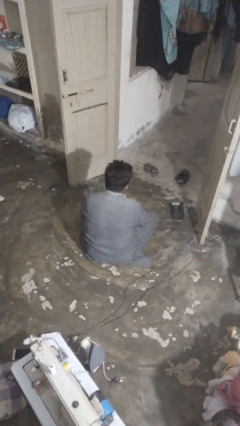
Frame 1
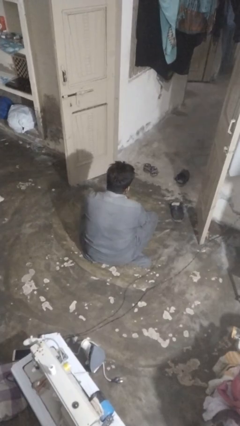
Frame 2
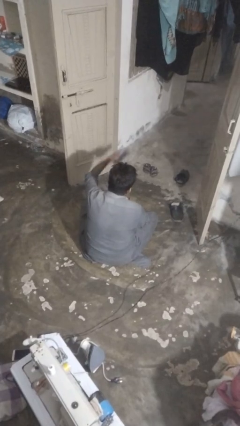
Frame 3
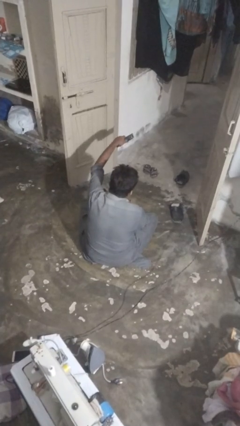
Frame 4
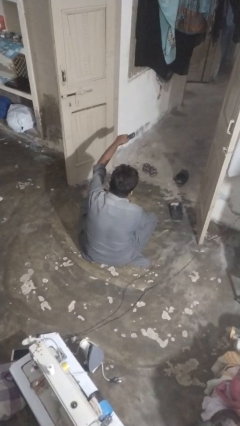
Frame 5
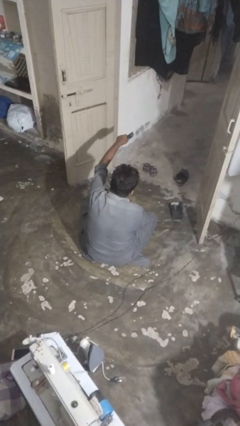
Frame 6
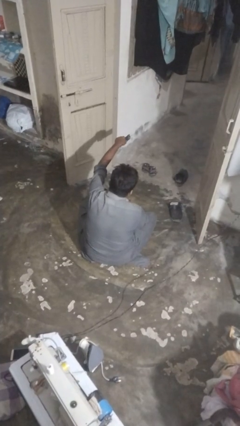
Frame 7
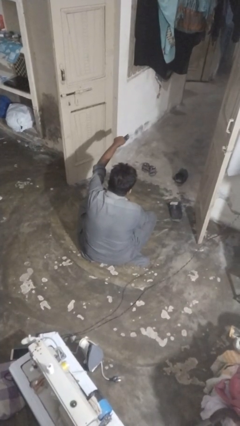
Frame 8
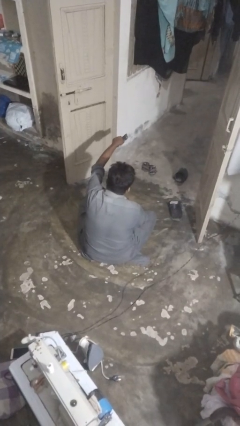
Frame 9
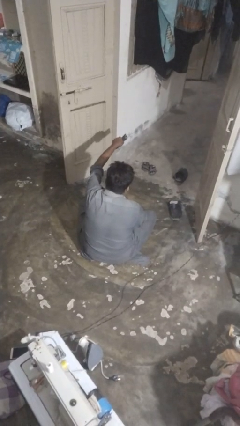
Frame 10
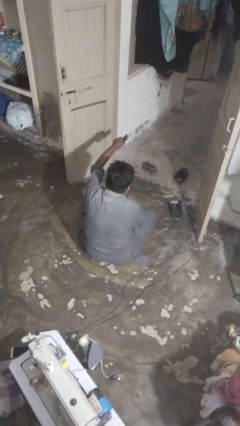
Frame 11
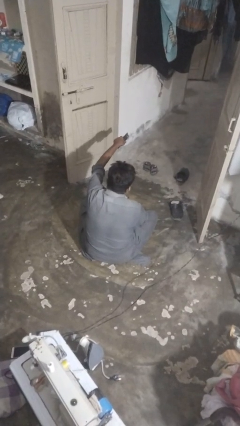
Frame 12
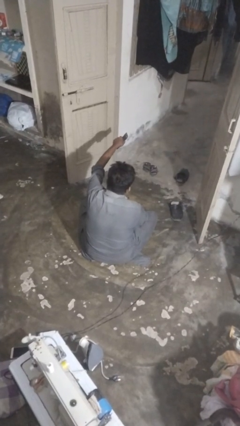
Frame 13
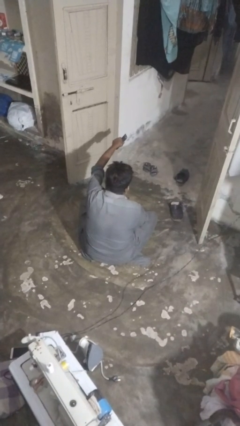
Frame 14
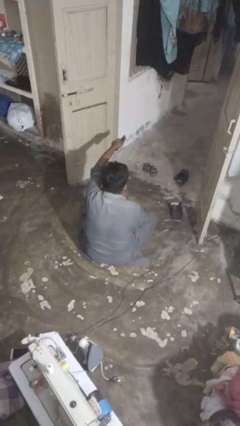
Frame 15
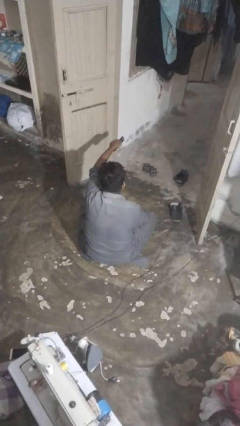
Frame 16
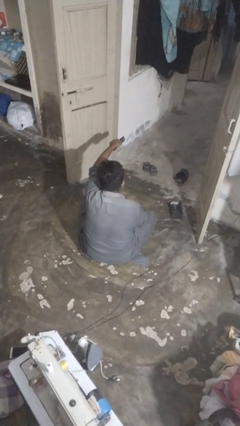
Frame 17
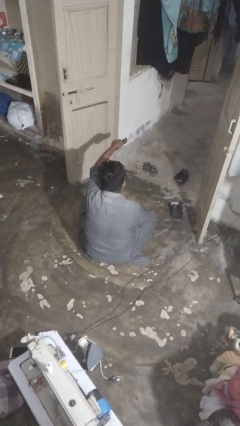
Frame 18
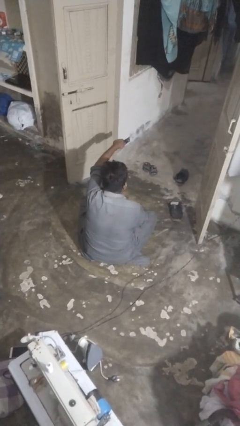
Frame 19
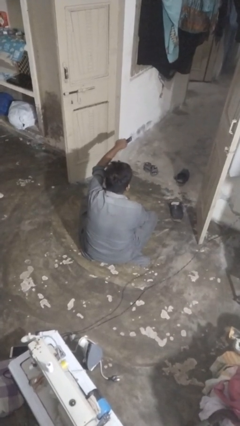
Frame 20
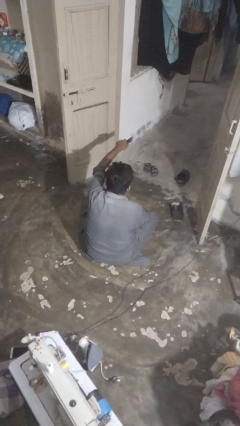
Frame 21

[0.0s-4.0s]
person uses television remote

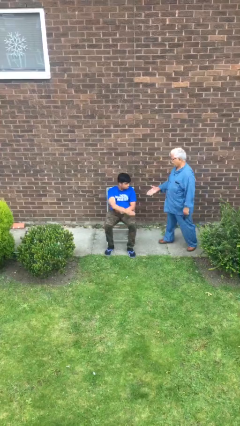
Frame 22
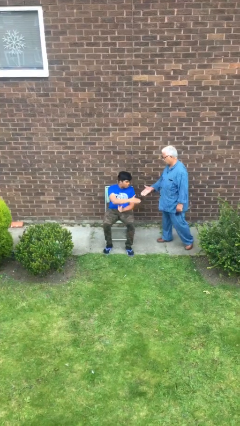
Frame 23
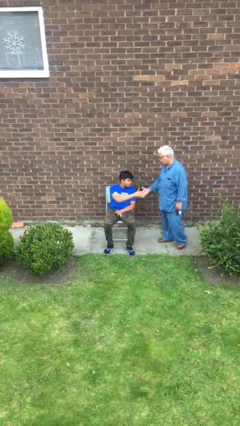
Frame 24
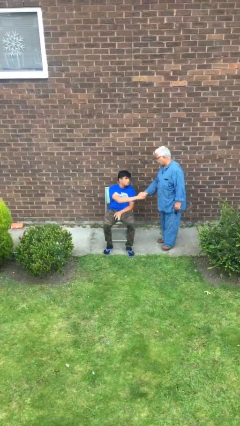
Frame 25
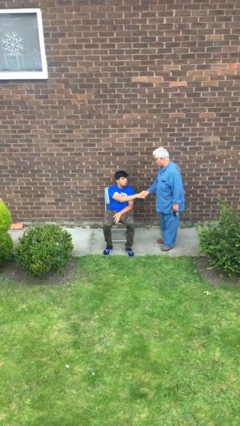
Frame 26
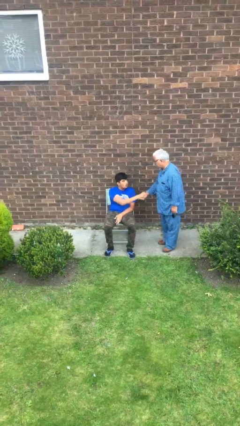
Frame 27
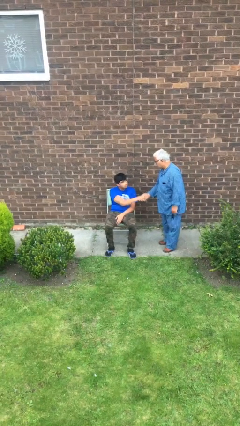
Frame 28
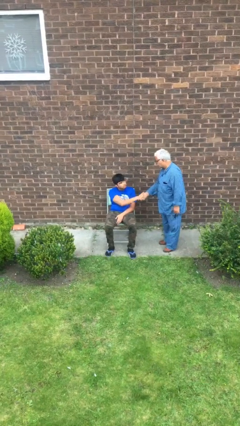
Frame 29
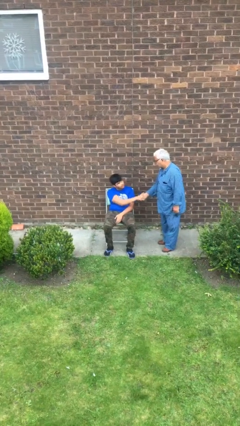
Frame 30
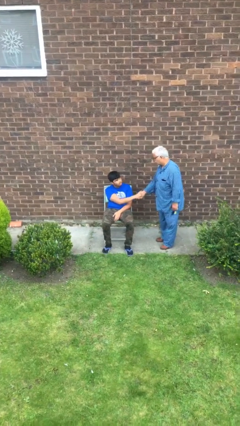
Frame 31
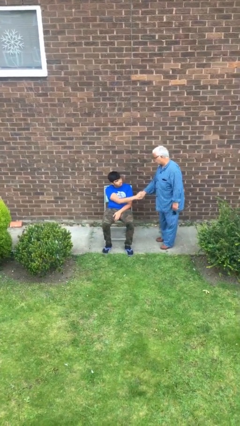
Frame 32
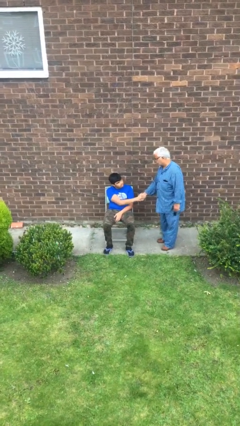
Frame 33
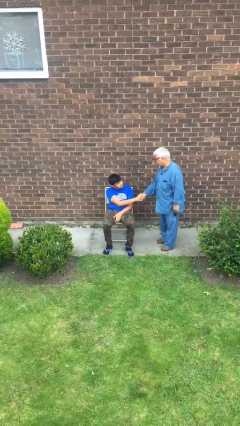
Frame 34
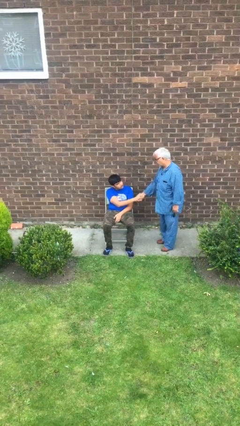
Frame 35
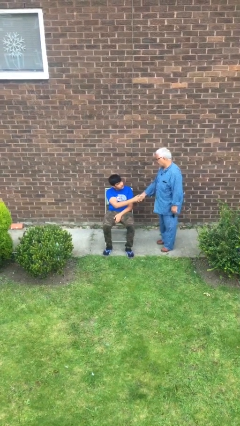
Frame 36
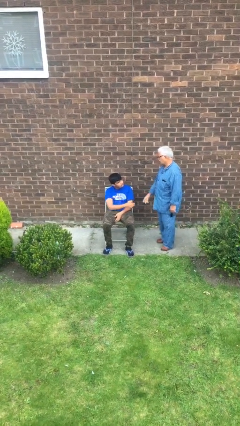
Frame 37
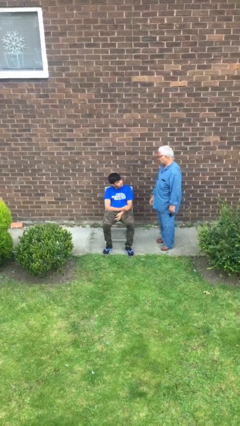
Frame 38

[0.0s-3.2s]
person shakes hand

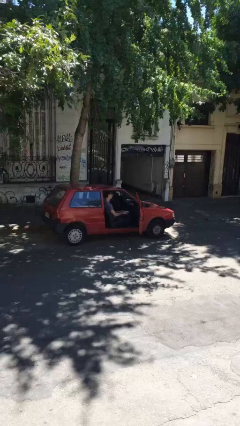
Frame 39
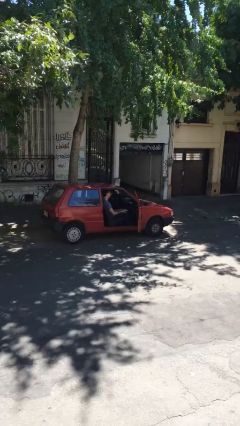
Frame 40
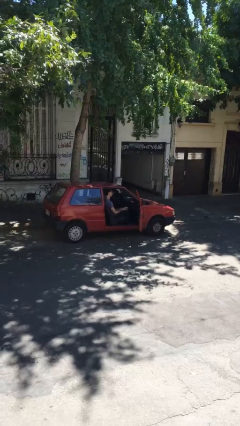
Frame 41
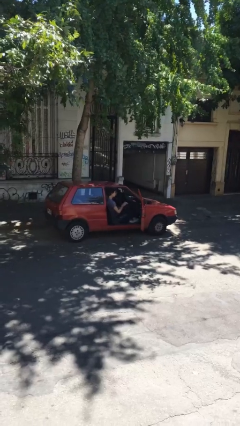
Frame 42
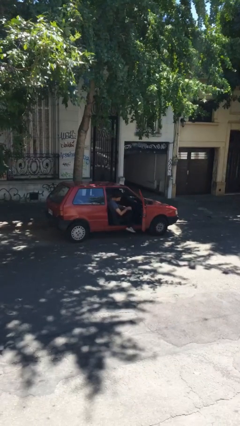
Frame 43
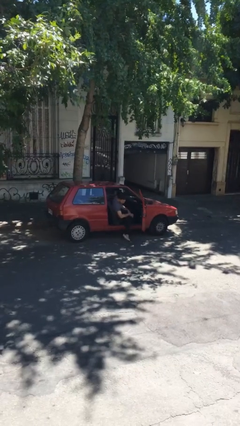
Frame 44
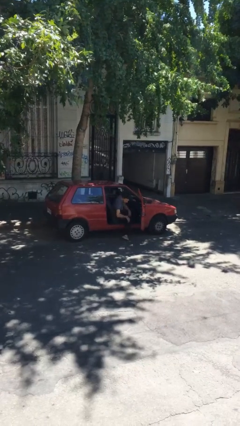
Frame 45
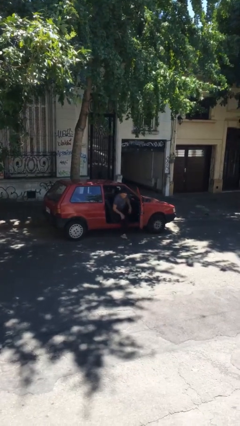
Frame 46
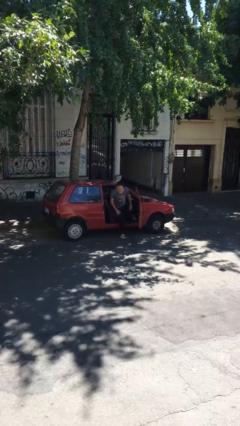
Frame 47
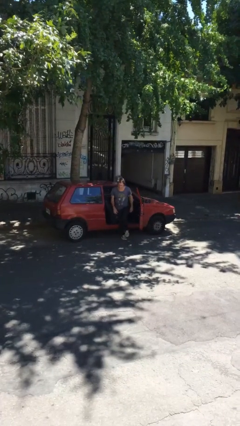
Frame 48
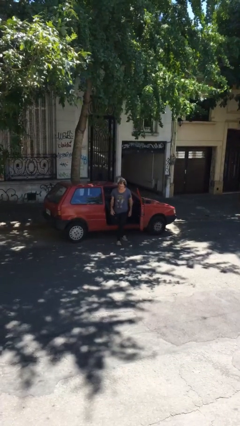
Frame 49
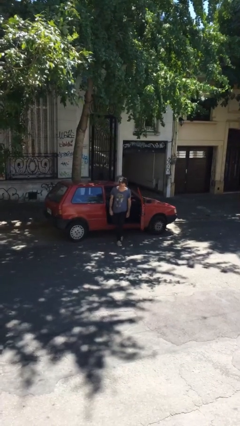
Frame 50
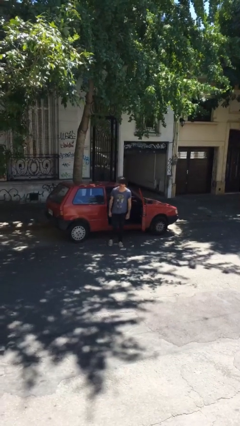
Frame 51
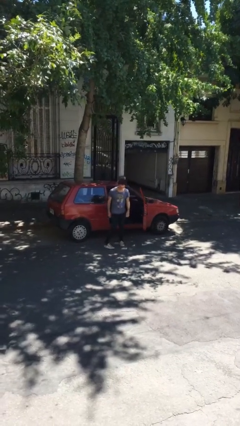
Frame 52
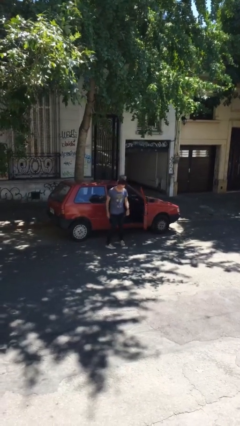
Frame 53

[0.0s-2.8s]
person exits car

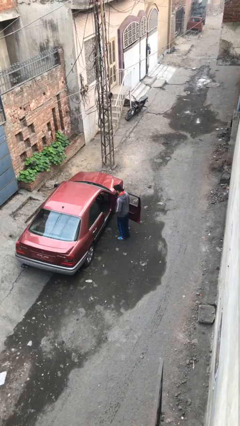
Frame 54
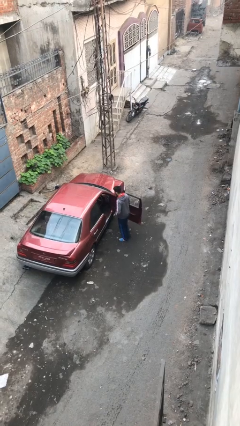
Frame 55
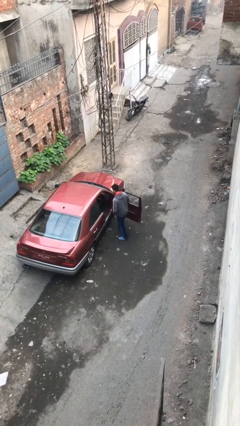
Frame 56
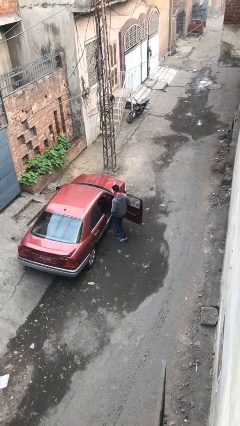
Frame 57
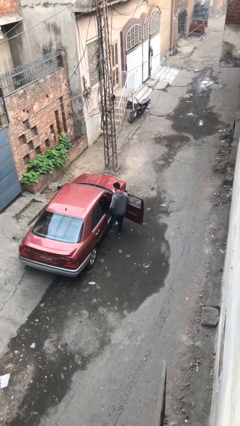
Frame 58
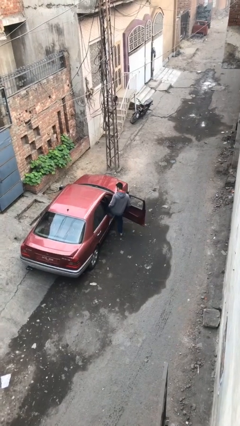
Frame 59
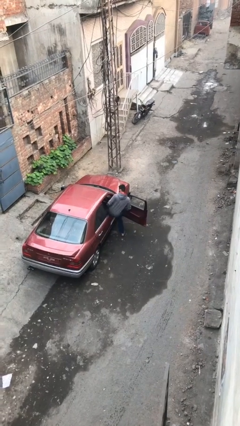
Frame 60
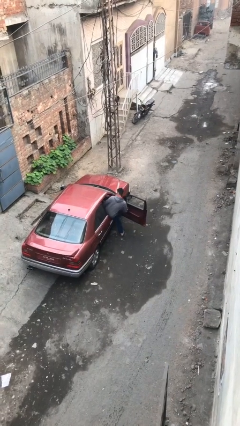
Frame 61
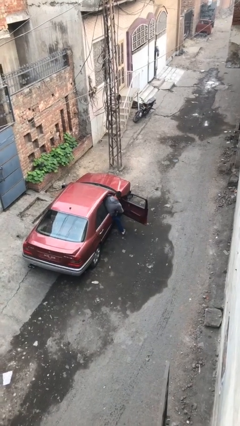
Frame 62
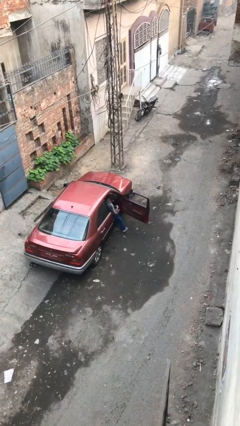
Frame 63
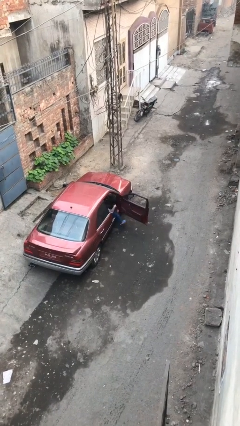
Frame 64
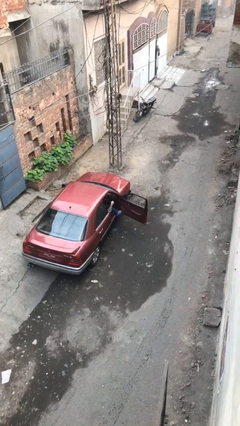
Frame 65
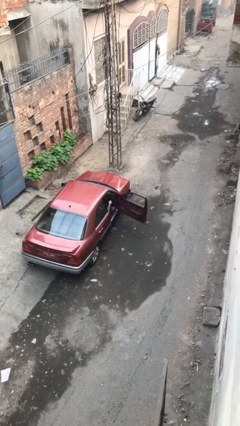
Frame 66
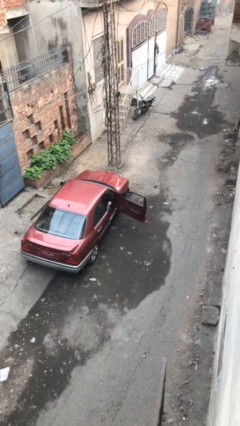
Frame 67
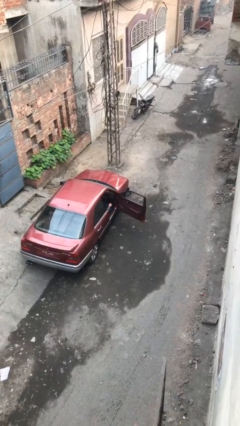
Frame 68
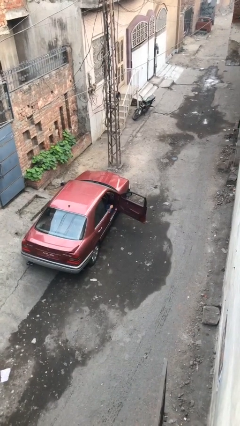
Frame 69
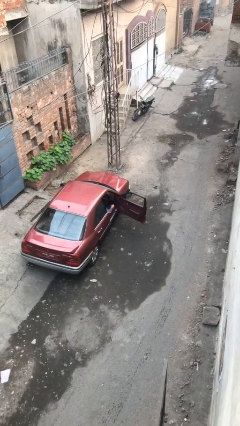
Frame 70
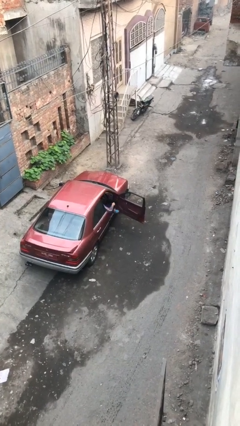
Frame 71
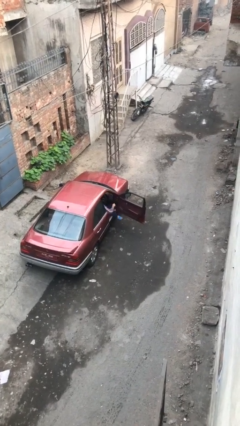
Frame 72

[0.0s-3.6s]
person enters car

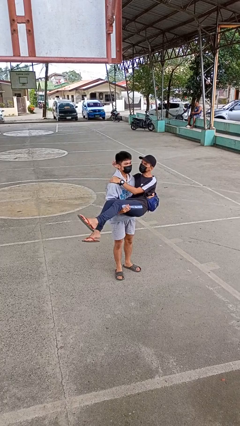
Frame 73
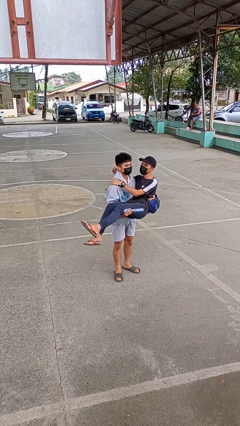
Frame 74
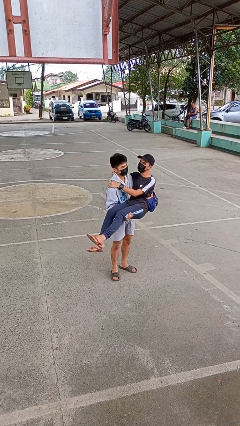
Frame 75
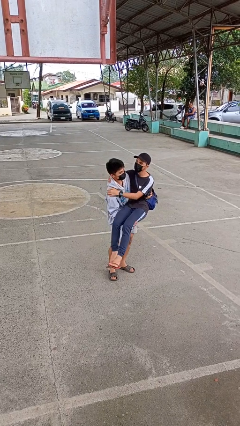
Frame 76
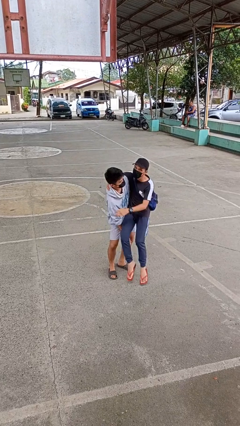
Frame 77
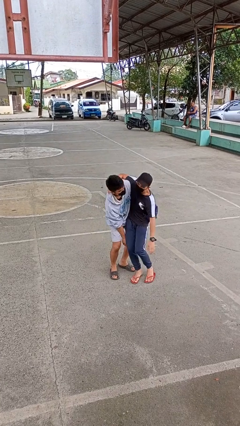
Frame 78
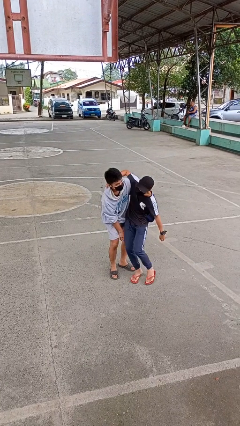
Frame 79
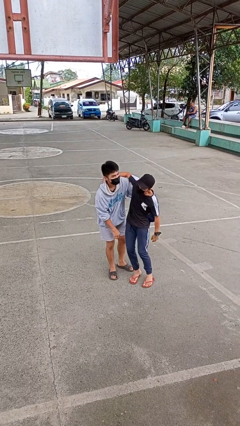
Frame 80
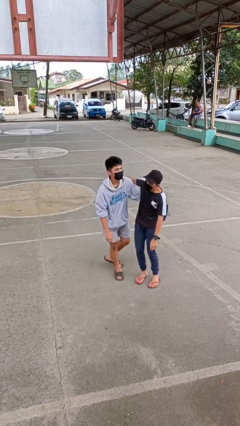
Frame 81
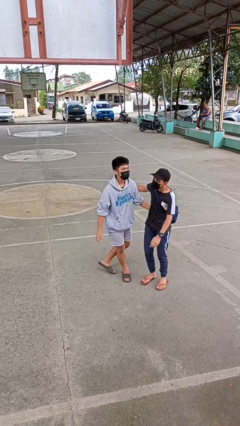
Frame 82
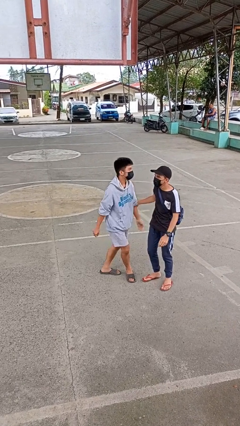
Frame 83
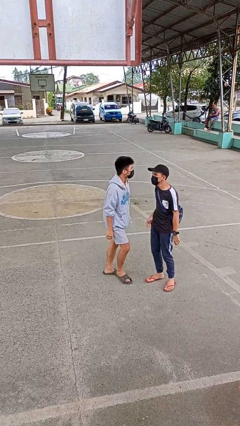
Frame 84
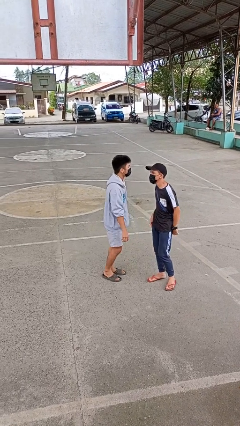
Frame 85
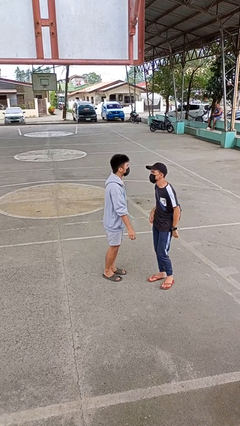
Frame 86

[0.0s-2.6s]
person puts down person

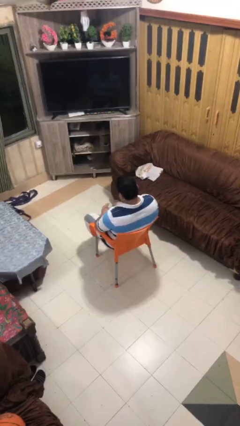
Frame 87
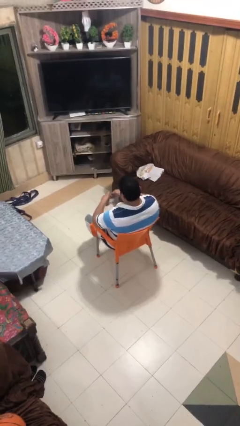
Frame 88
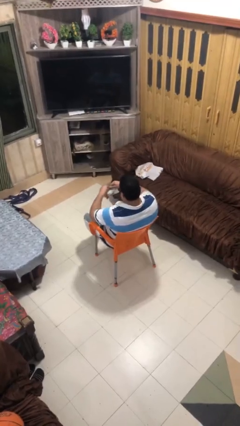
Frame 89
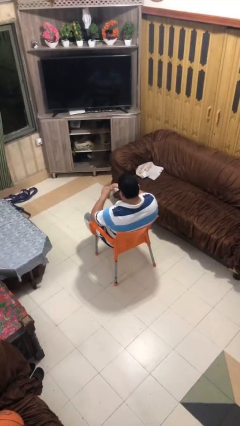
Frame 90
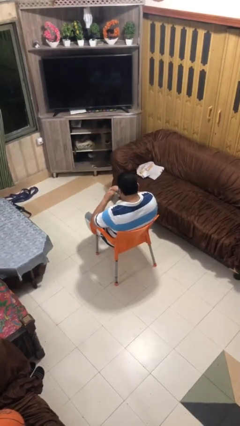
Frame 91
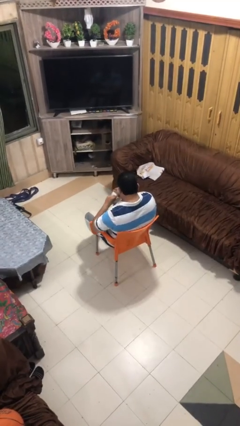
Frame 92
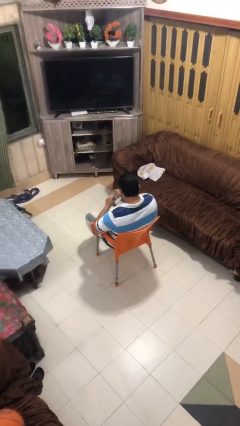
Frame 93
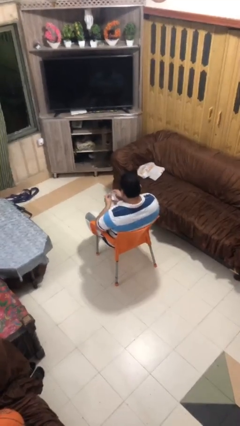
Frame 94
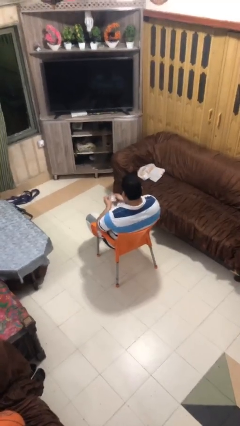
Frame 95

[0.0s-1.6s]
person tears paper
